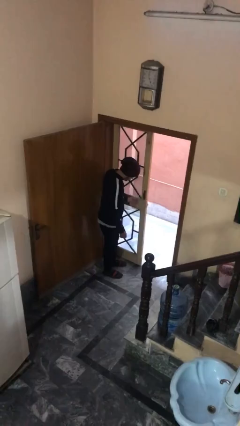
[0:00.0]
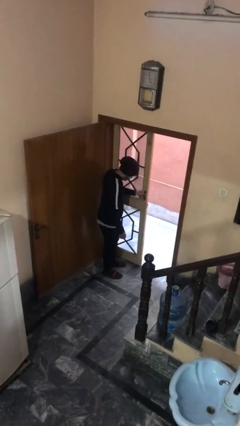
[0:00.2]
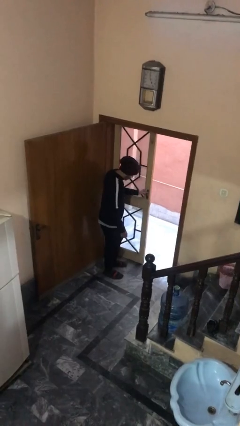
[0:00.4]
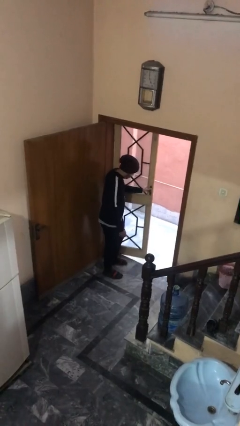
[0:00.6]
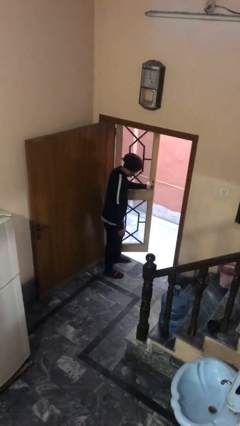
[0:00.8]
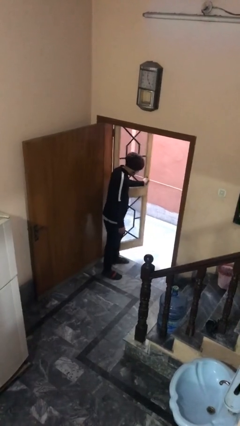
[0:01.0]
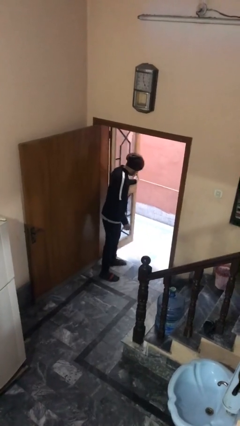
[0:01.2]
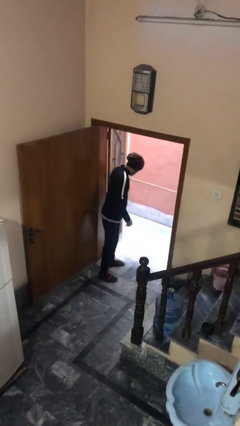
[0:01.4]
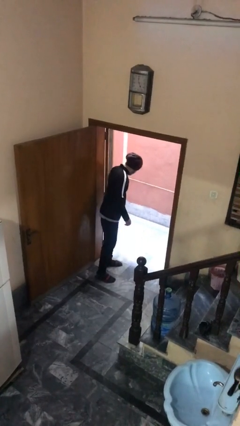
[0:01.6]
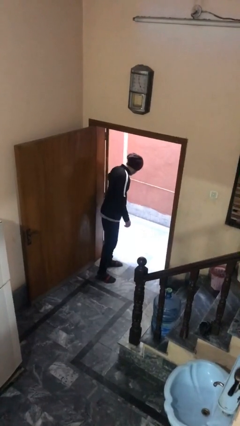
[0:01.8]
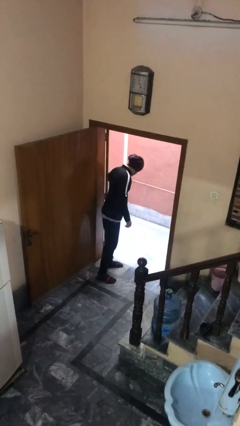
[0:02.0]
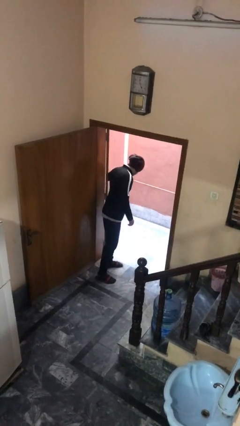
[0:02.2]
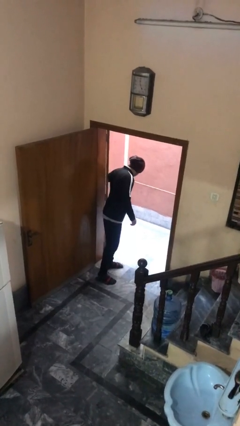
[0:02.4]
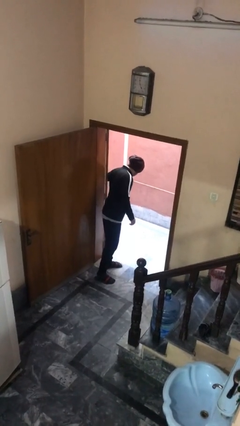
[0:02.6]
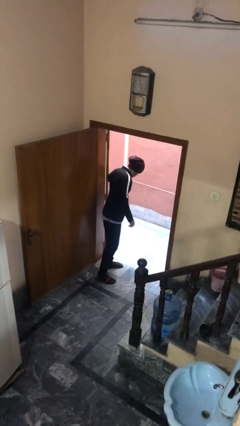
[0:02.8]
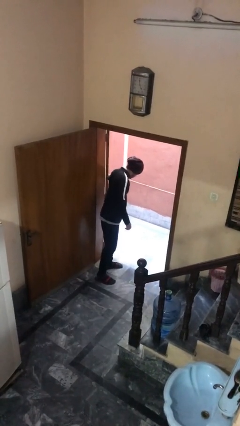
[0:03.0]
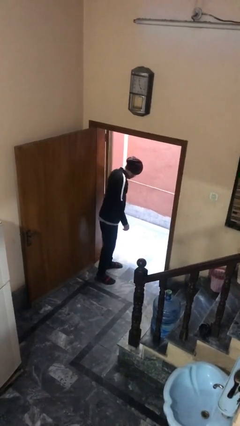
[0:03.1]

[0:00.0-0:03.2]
person opens facility door

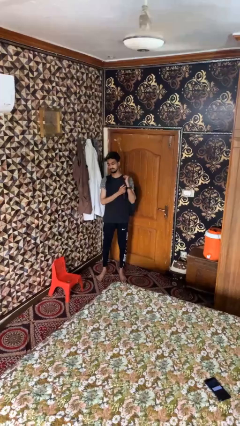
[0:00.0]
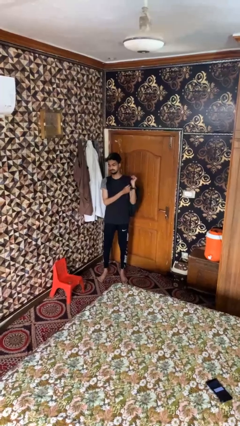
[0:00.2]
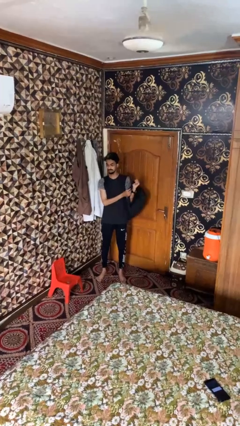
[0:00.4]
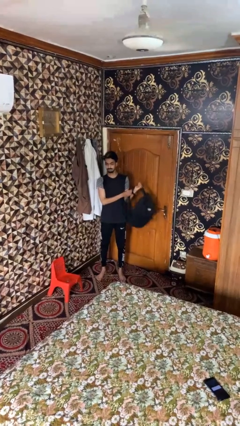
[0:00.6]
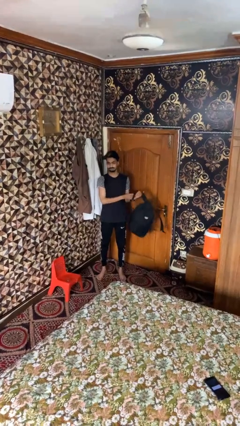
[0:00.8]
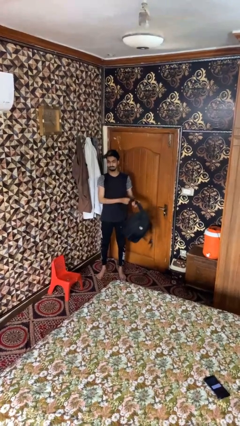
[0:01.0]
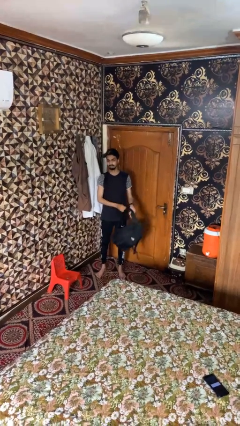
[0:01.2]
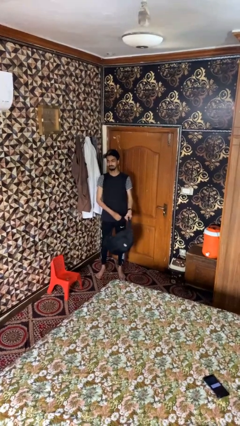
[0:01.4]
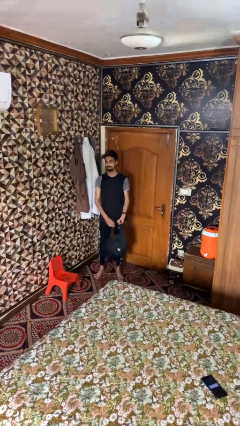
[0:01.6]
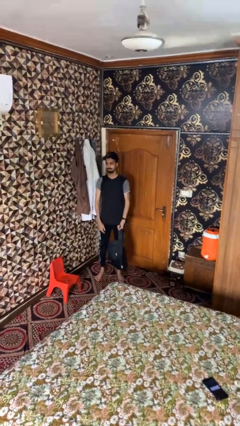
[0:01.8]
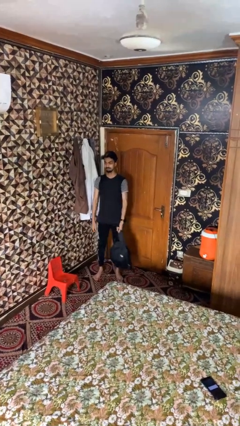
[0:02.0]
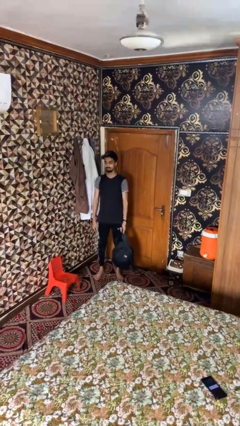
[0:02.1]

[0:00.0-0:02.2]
person takes off backpack

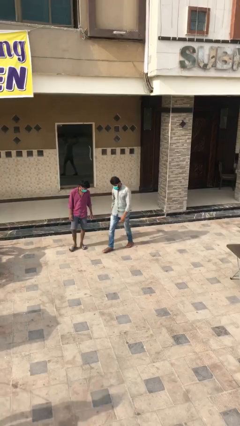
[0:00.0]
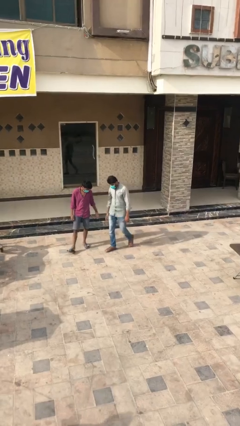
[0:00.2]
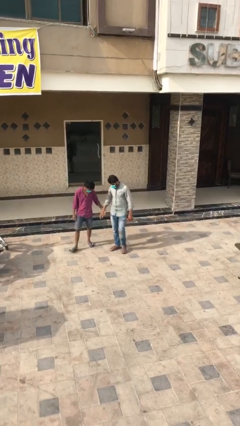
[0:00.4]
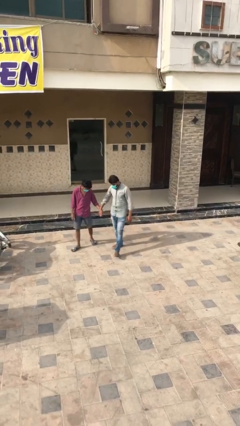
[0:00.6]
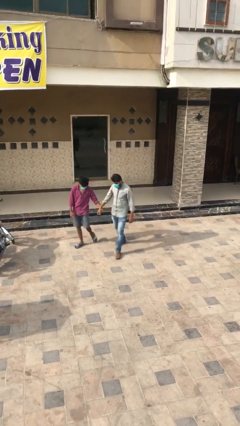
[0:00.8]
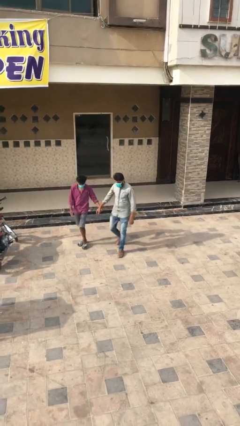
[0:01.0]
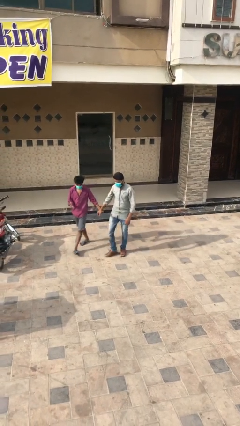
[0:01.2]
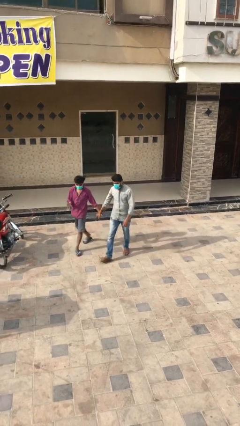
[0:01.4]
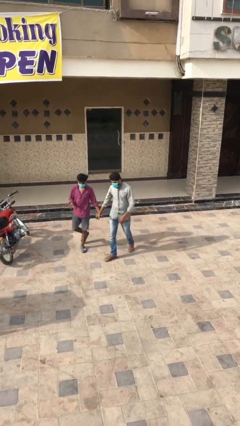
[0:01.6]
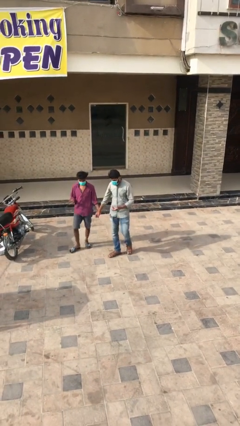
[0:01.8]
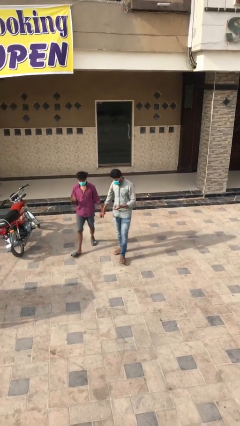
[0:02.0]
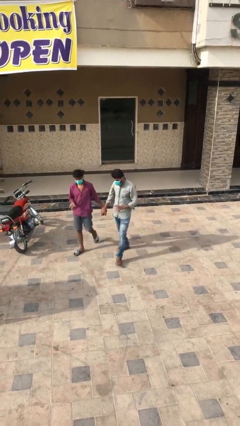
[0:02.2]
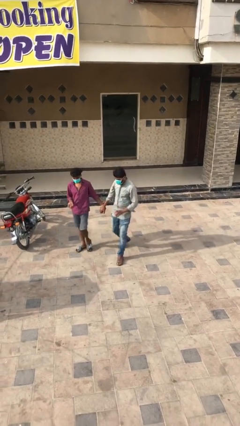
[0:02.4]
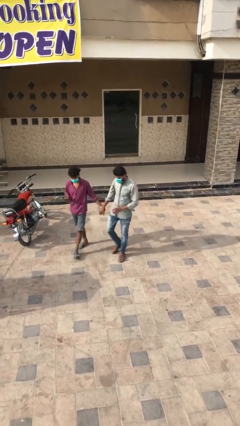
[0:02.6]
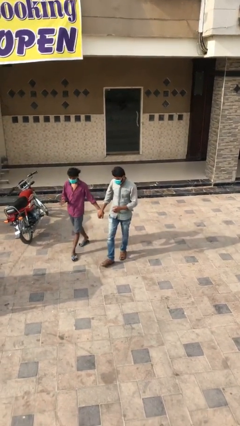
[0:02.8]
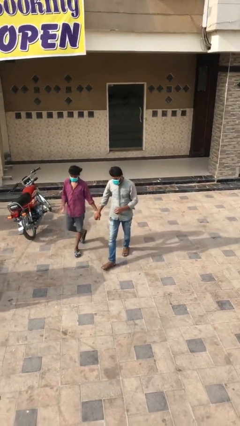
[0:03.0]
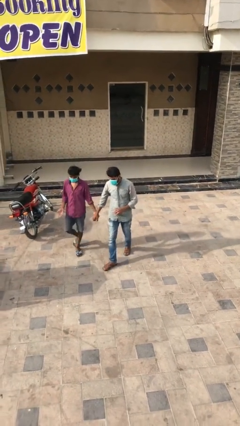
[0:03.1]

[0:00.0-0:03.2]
person holds hand

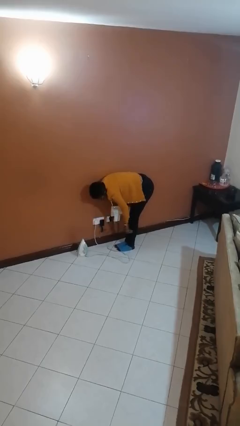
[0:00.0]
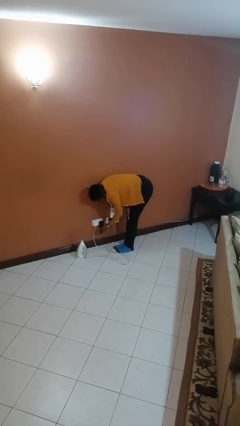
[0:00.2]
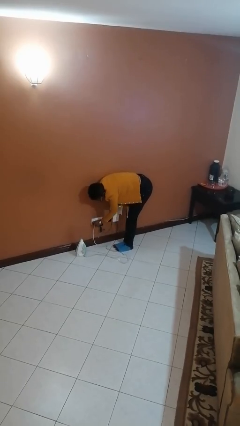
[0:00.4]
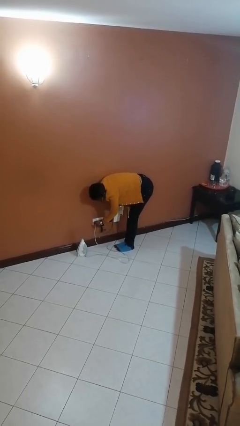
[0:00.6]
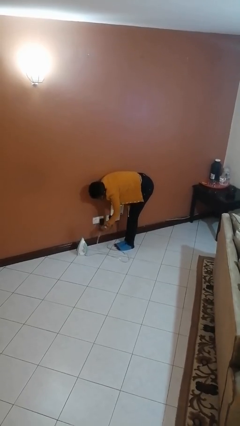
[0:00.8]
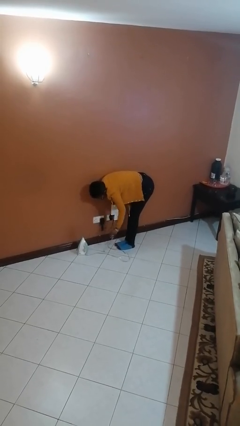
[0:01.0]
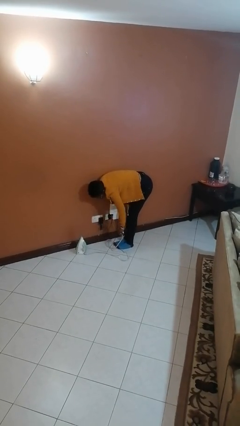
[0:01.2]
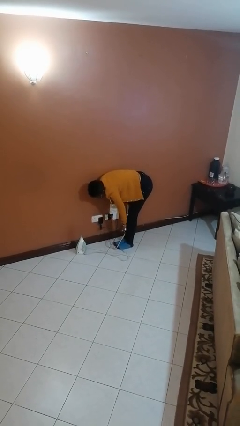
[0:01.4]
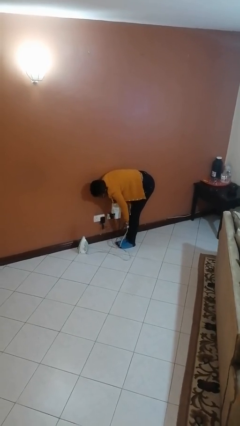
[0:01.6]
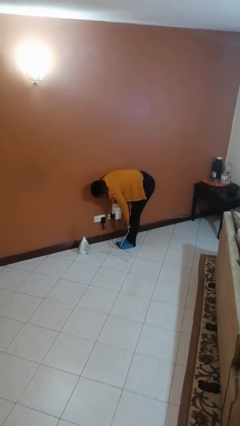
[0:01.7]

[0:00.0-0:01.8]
person unplugs from electrical socket

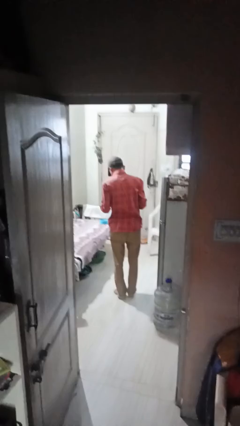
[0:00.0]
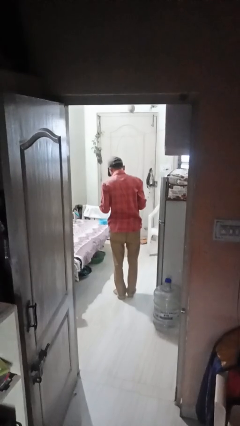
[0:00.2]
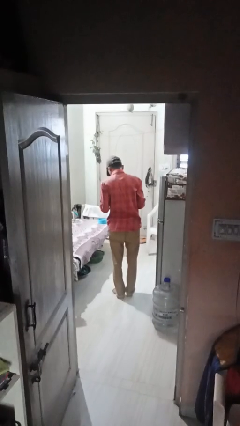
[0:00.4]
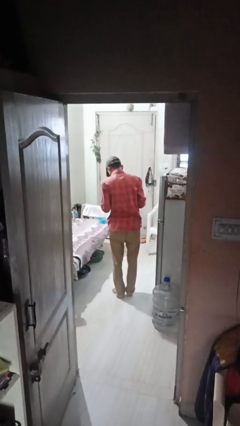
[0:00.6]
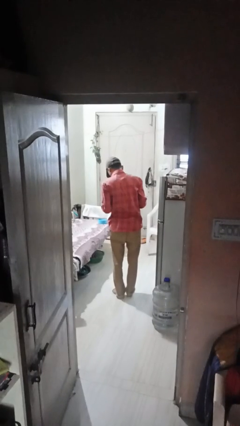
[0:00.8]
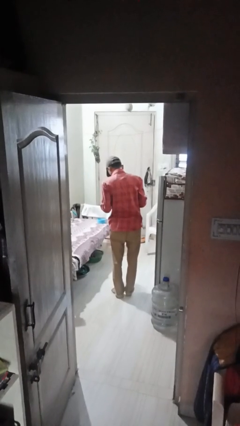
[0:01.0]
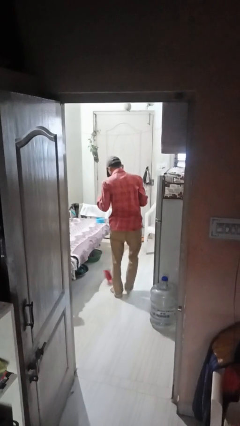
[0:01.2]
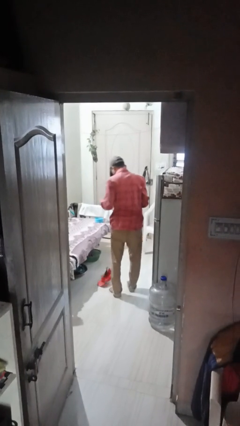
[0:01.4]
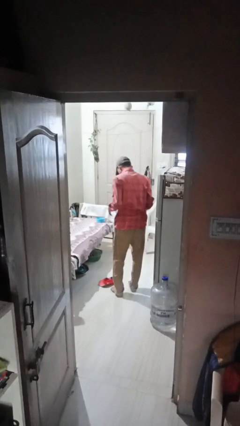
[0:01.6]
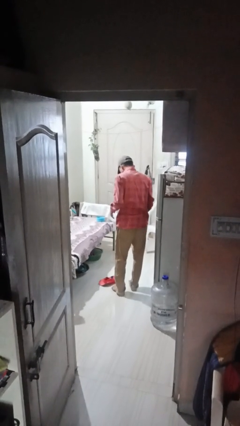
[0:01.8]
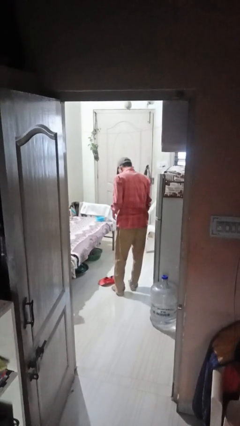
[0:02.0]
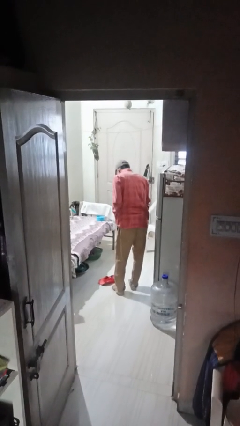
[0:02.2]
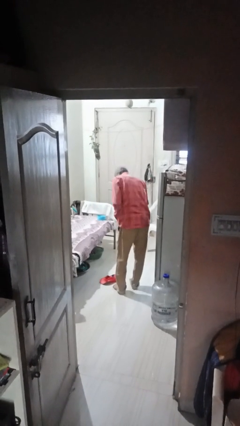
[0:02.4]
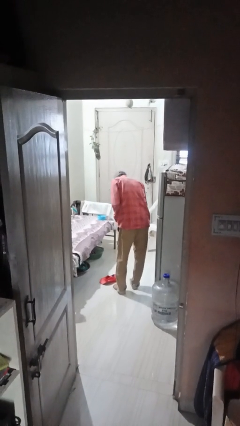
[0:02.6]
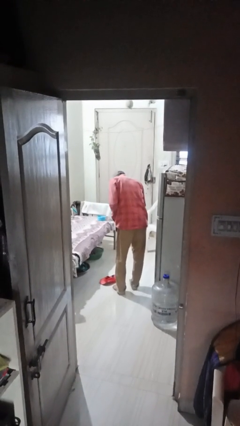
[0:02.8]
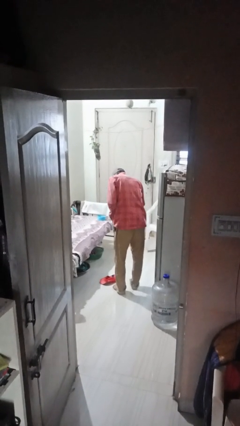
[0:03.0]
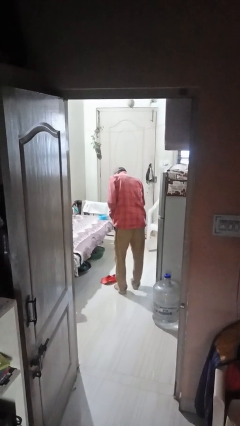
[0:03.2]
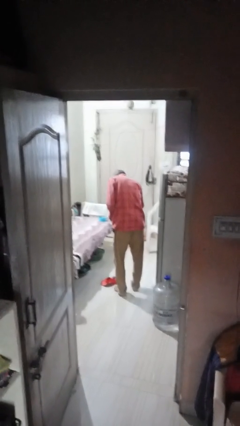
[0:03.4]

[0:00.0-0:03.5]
person drops object

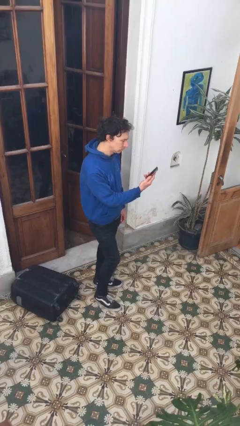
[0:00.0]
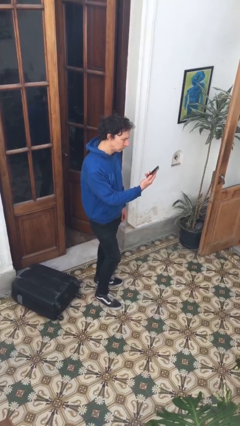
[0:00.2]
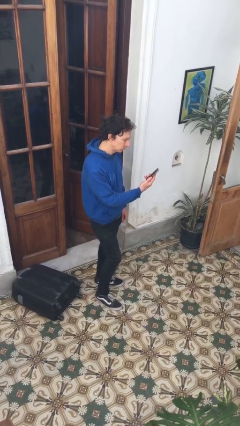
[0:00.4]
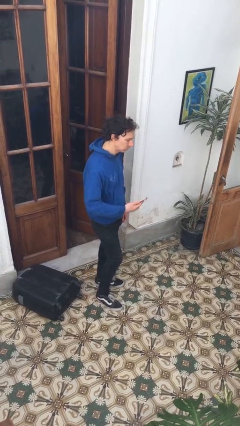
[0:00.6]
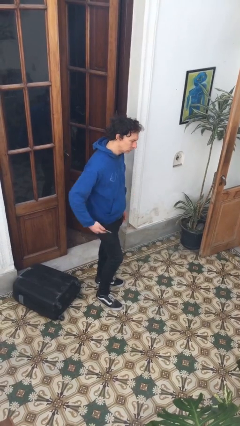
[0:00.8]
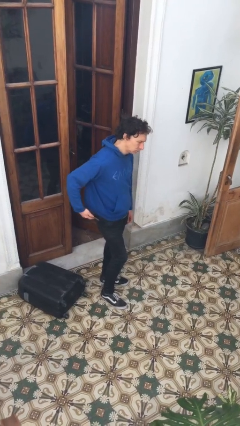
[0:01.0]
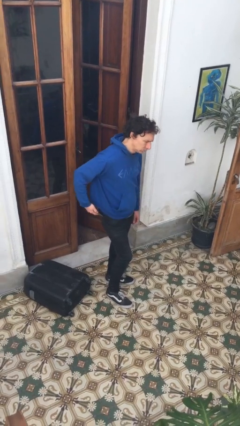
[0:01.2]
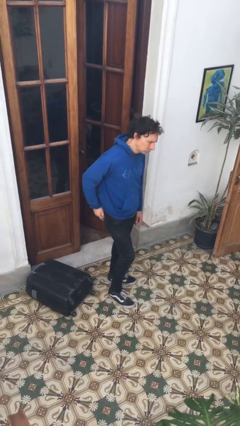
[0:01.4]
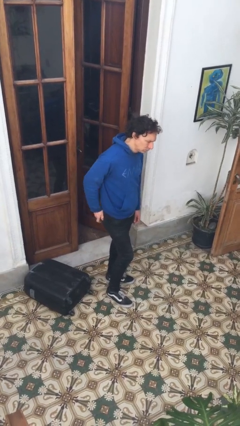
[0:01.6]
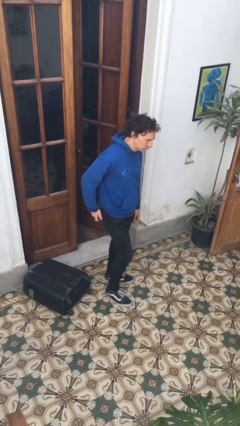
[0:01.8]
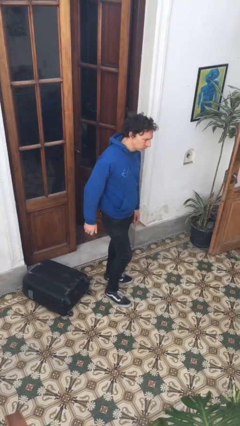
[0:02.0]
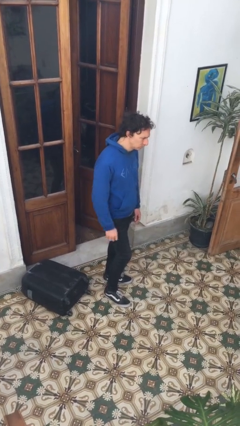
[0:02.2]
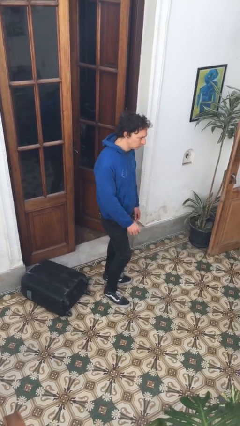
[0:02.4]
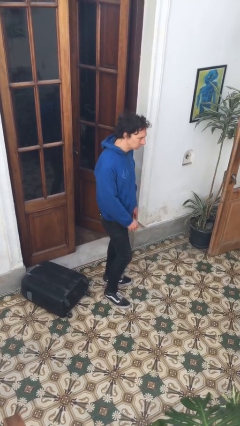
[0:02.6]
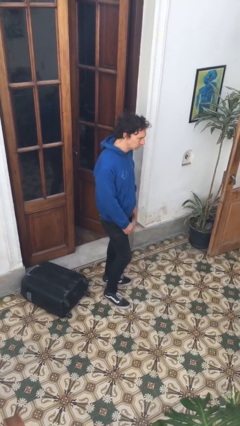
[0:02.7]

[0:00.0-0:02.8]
person puts phone into pocket

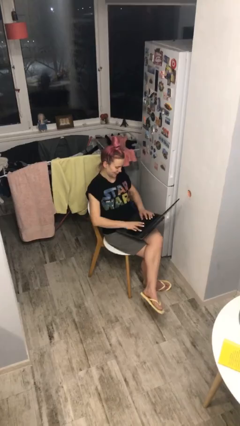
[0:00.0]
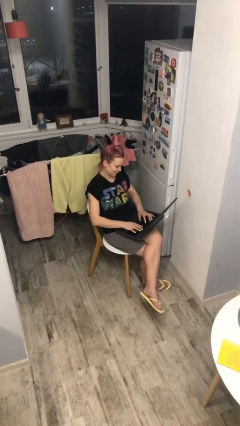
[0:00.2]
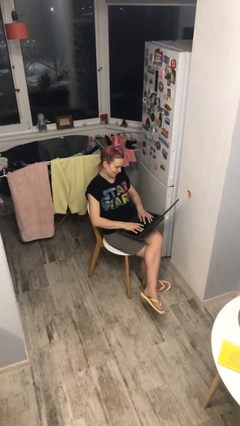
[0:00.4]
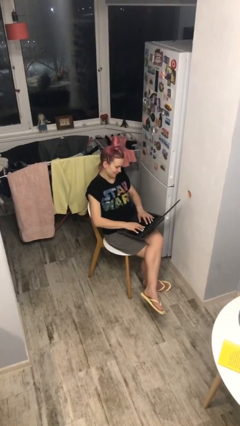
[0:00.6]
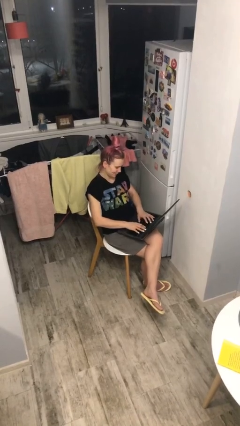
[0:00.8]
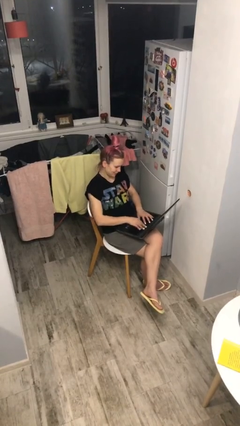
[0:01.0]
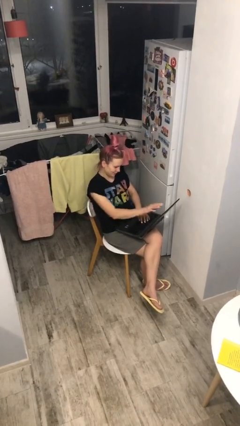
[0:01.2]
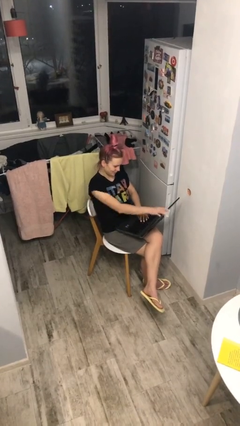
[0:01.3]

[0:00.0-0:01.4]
person interacts with laptop
